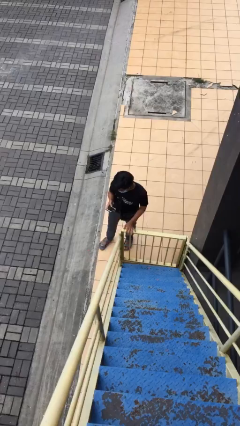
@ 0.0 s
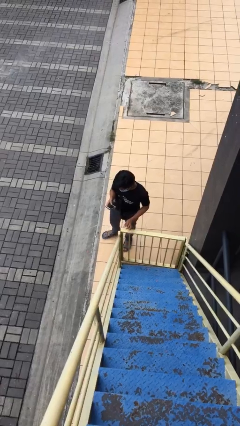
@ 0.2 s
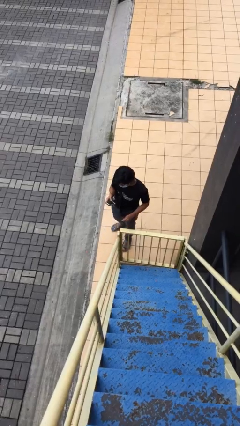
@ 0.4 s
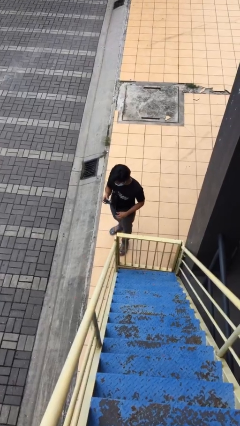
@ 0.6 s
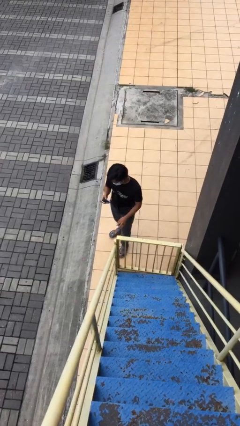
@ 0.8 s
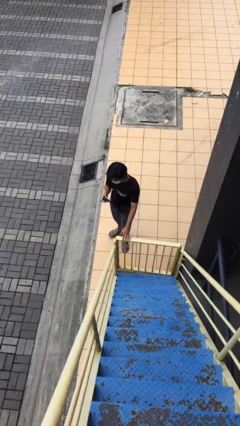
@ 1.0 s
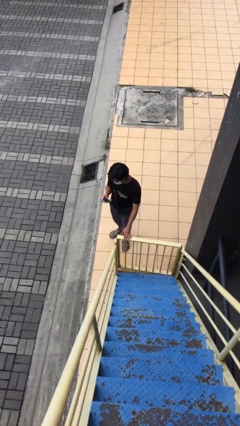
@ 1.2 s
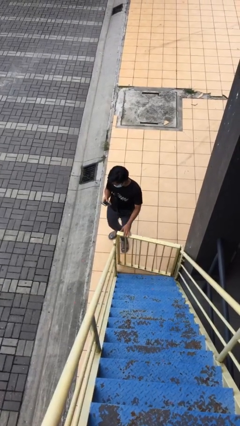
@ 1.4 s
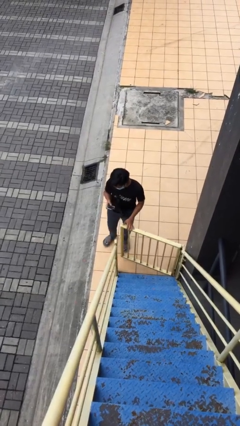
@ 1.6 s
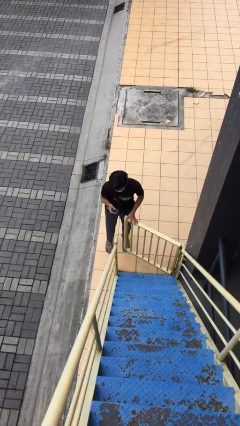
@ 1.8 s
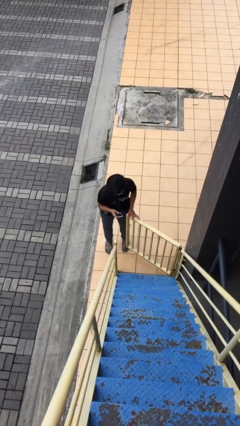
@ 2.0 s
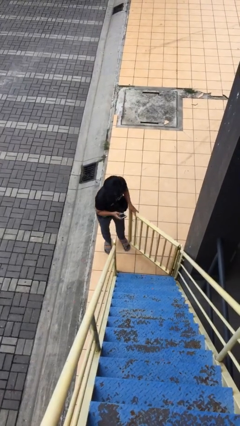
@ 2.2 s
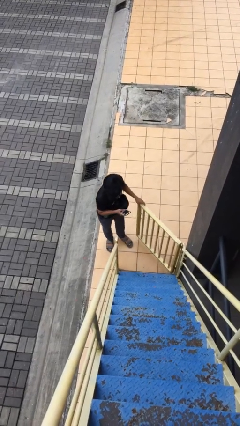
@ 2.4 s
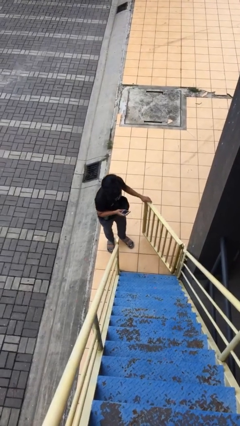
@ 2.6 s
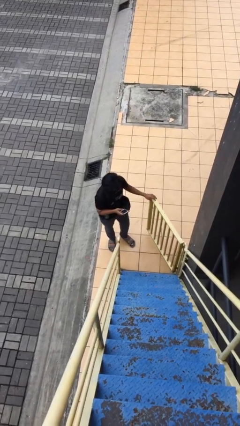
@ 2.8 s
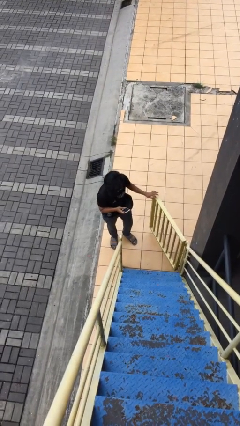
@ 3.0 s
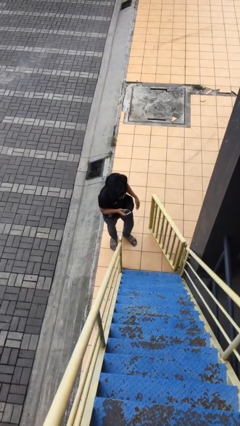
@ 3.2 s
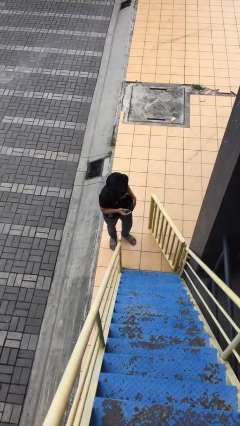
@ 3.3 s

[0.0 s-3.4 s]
person opens facility door

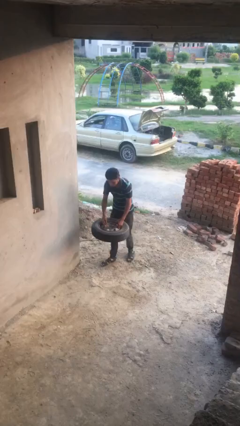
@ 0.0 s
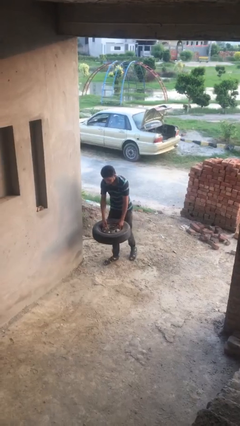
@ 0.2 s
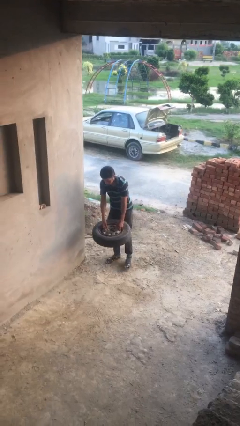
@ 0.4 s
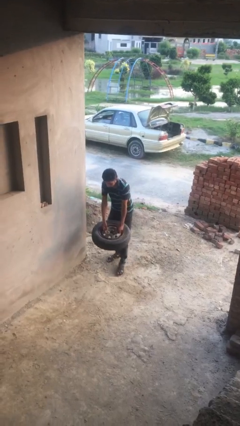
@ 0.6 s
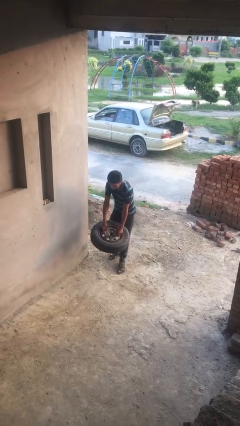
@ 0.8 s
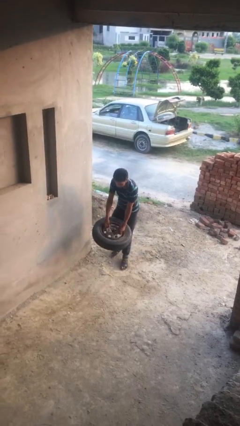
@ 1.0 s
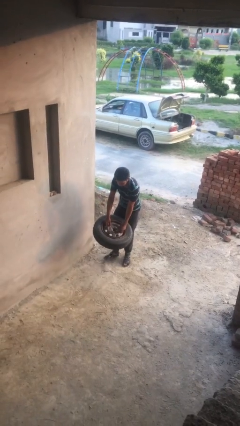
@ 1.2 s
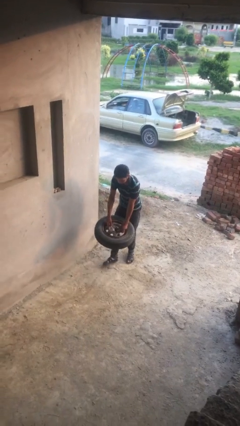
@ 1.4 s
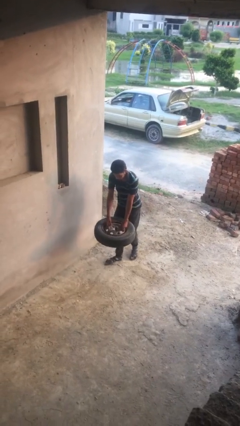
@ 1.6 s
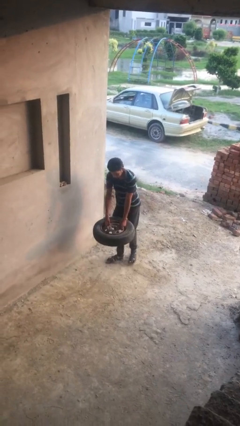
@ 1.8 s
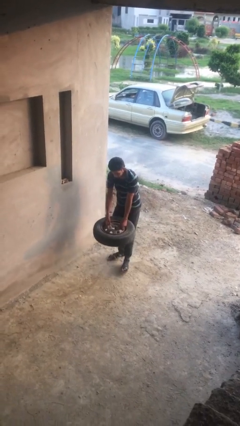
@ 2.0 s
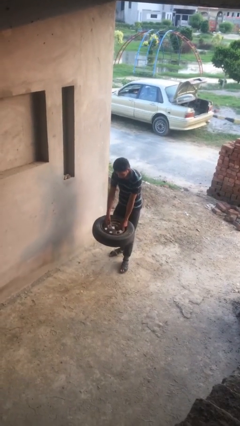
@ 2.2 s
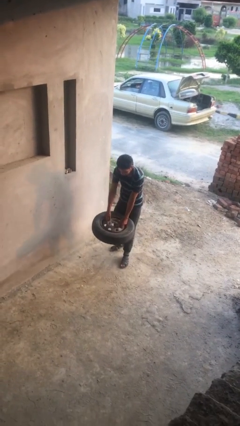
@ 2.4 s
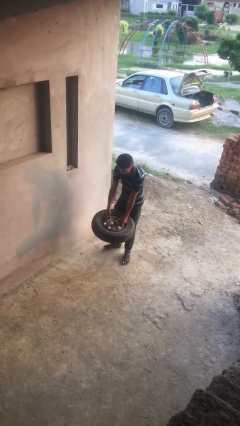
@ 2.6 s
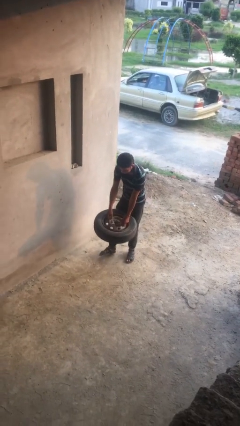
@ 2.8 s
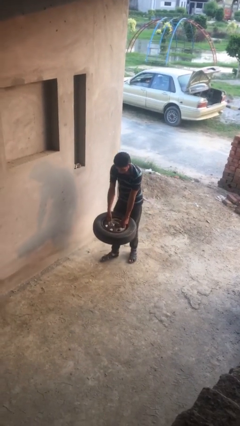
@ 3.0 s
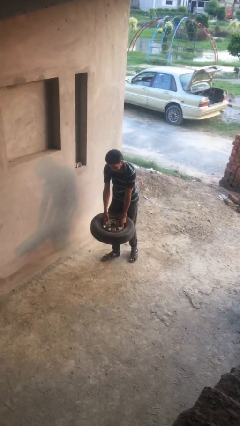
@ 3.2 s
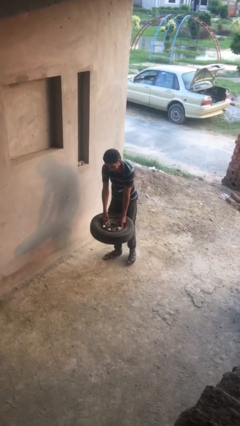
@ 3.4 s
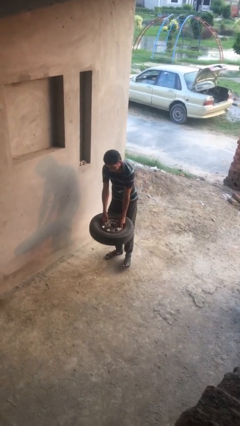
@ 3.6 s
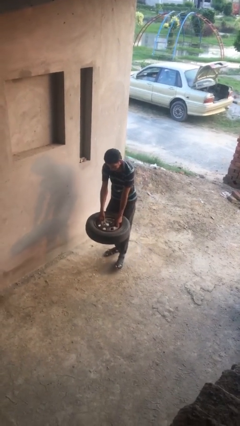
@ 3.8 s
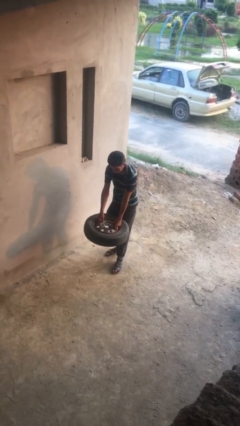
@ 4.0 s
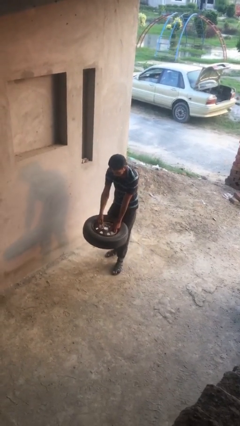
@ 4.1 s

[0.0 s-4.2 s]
person carries heavy object

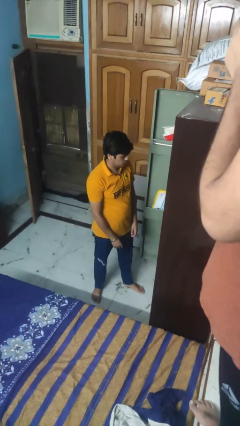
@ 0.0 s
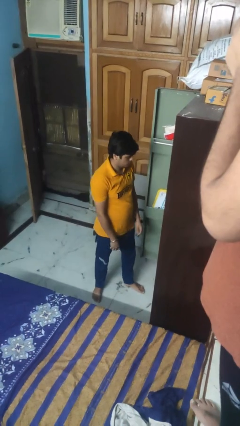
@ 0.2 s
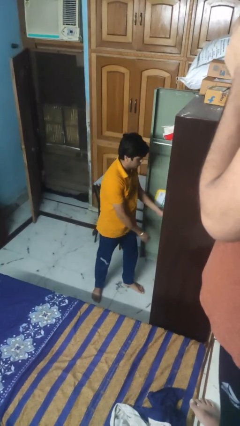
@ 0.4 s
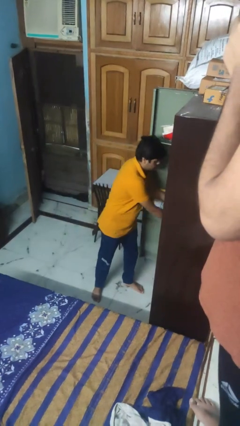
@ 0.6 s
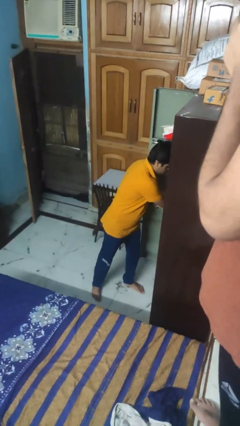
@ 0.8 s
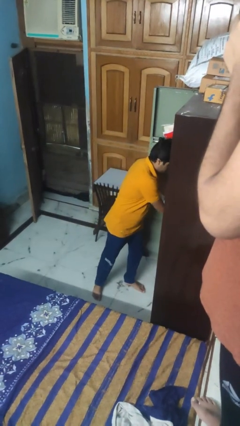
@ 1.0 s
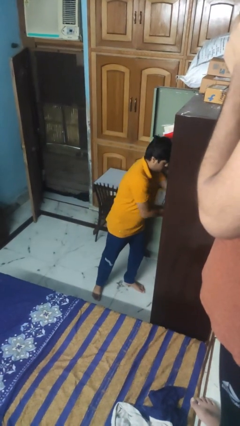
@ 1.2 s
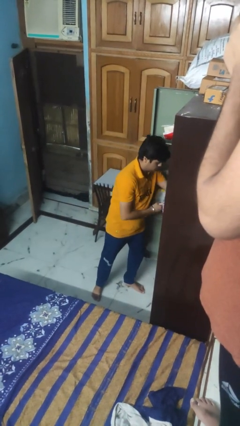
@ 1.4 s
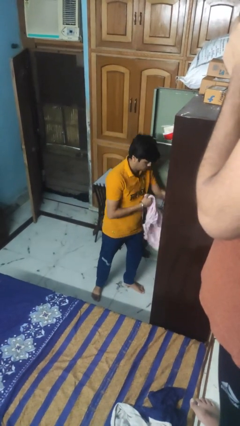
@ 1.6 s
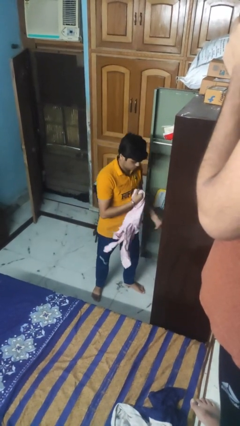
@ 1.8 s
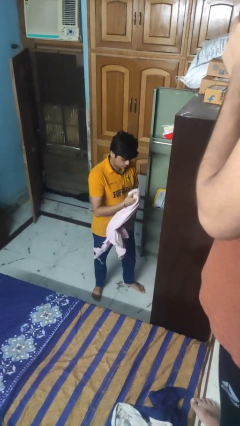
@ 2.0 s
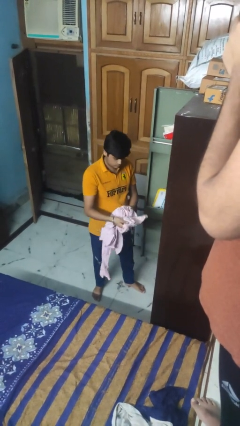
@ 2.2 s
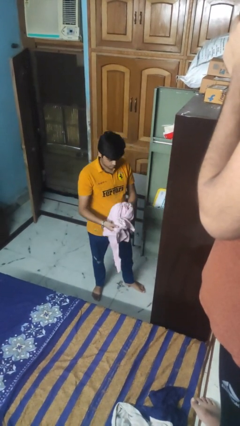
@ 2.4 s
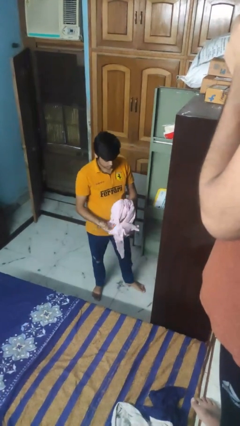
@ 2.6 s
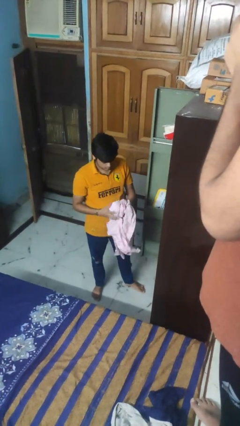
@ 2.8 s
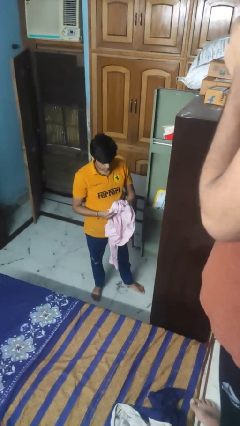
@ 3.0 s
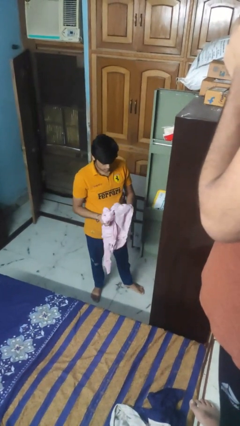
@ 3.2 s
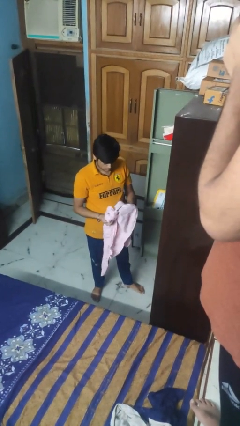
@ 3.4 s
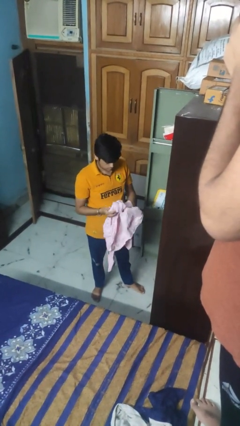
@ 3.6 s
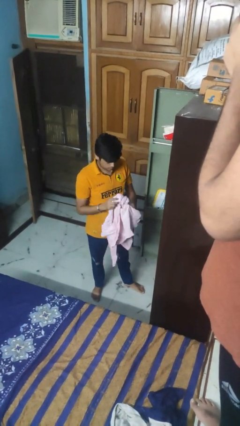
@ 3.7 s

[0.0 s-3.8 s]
person takes clothes from dresser

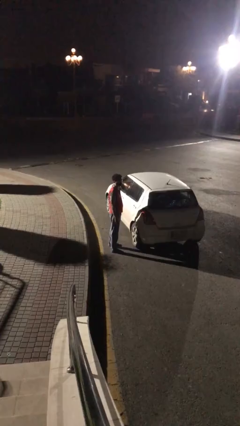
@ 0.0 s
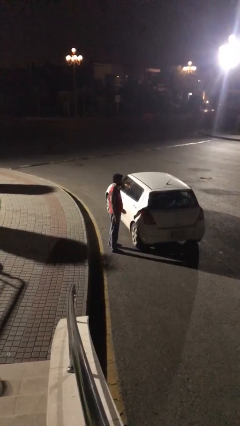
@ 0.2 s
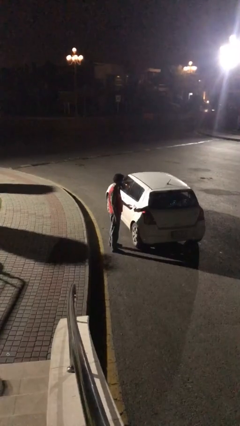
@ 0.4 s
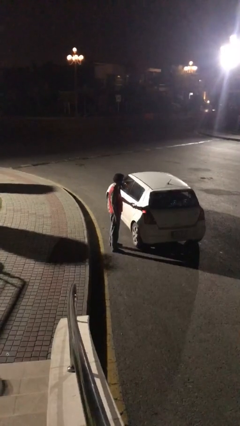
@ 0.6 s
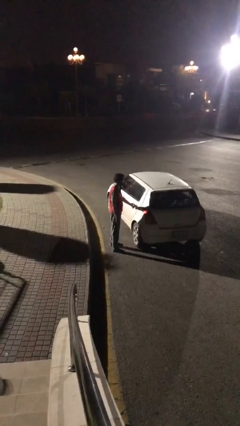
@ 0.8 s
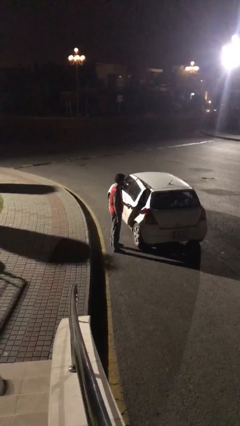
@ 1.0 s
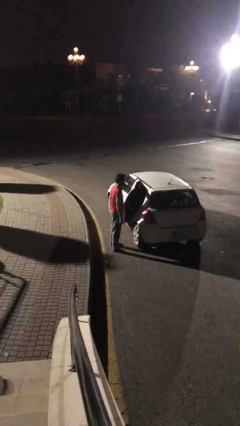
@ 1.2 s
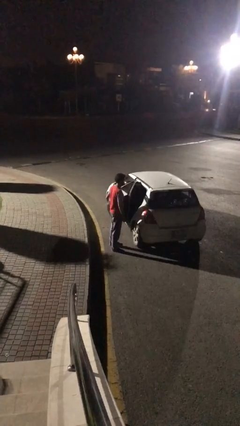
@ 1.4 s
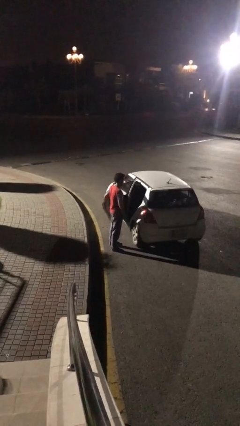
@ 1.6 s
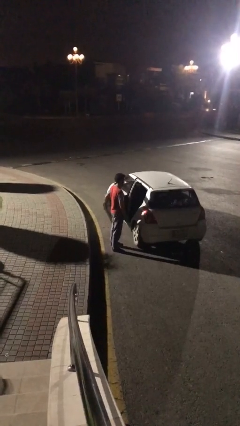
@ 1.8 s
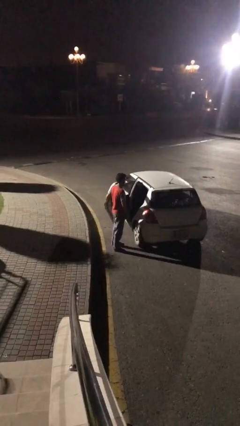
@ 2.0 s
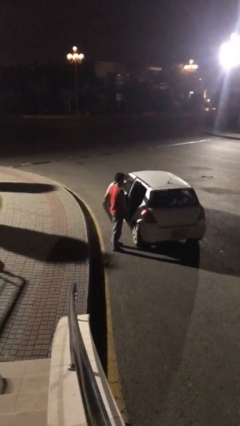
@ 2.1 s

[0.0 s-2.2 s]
person opens car door

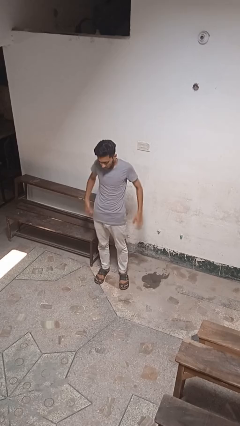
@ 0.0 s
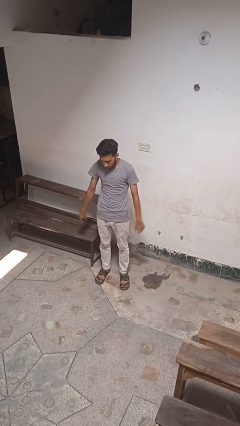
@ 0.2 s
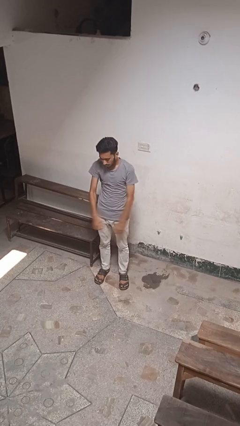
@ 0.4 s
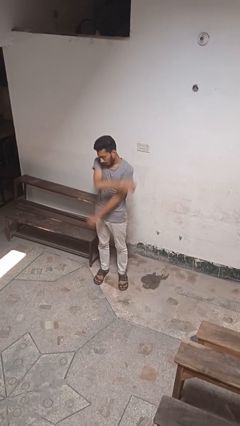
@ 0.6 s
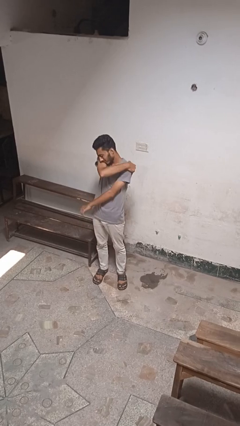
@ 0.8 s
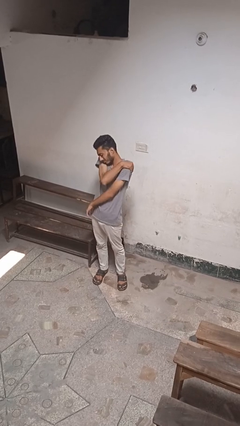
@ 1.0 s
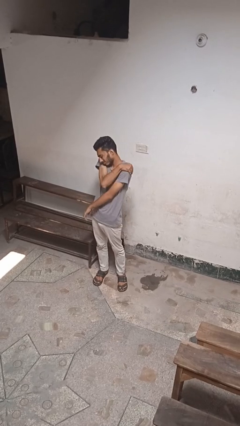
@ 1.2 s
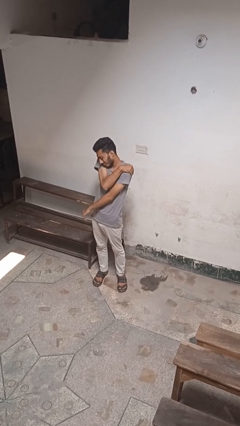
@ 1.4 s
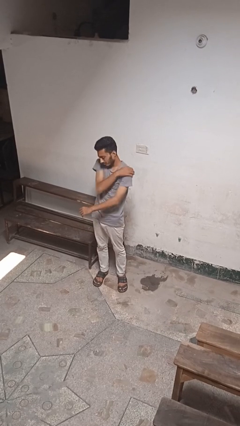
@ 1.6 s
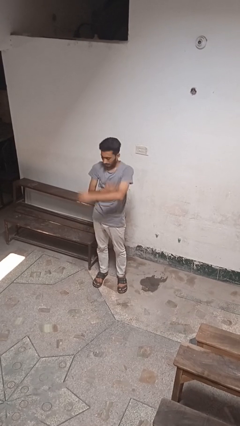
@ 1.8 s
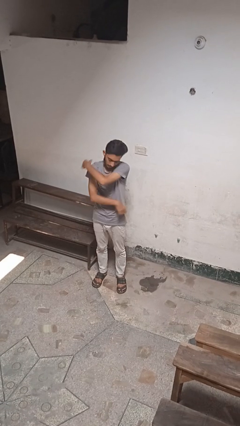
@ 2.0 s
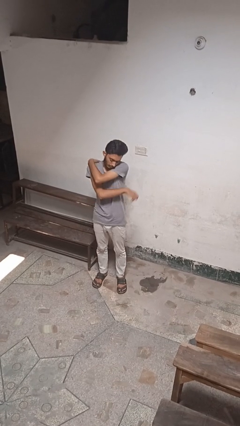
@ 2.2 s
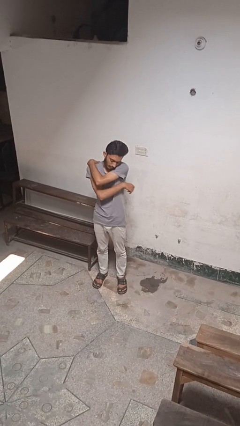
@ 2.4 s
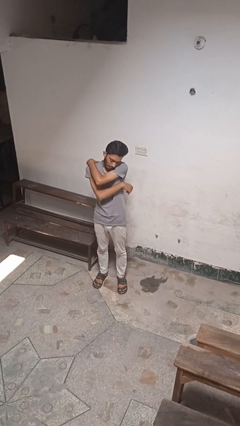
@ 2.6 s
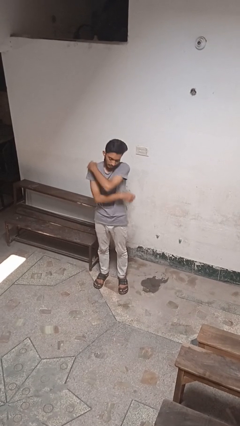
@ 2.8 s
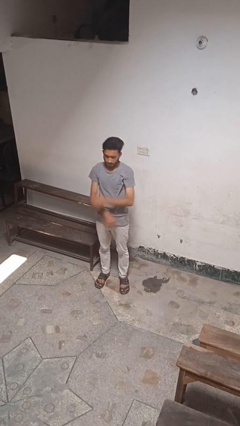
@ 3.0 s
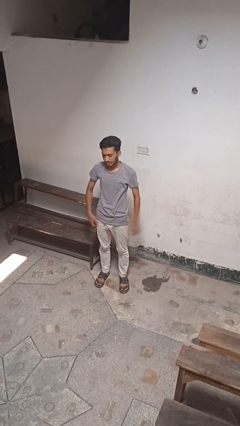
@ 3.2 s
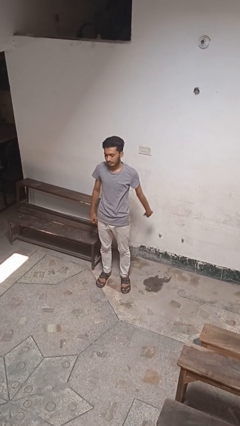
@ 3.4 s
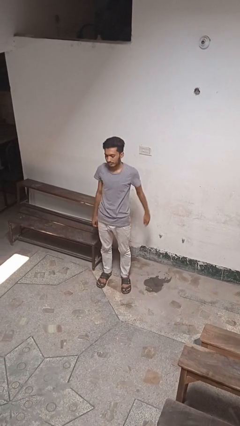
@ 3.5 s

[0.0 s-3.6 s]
person puts feet up
